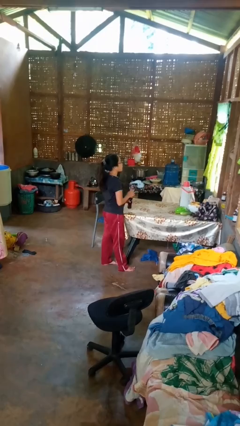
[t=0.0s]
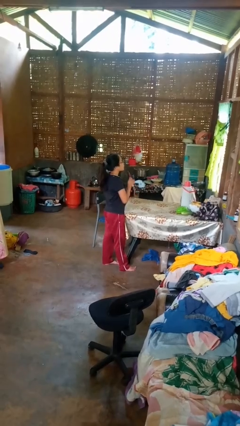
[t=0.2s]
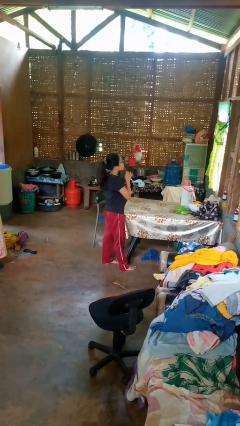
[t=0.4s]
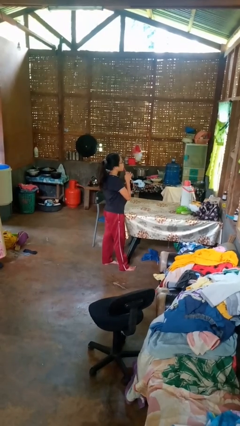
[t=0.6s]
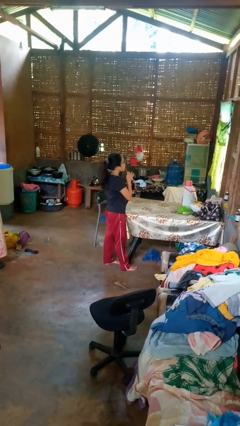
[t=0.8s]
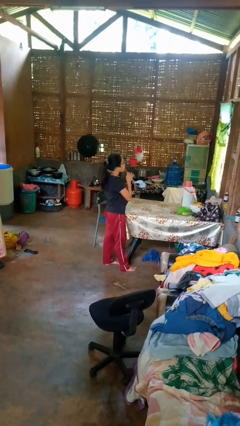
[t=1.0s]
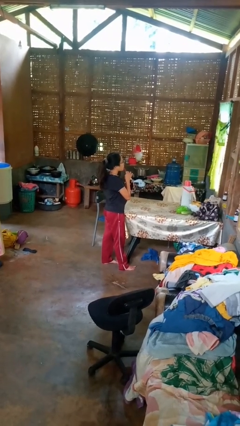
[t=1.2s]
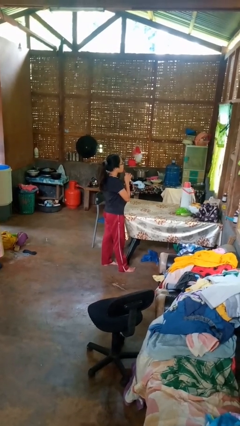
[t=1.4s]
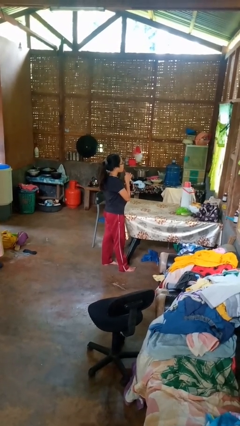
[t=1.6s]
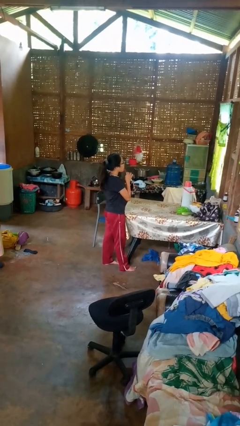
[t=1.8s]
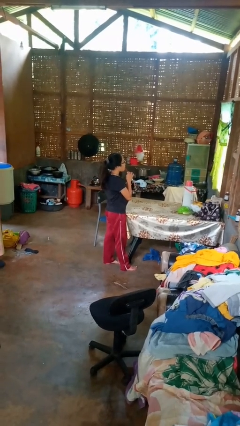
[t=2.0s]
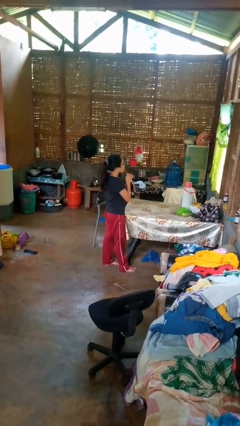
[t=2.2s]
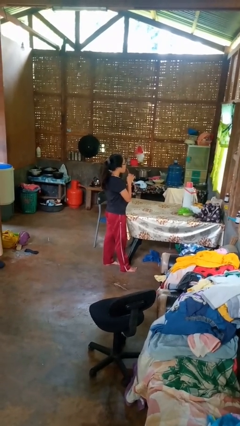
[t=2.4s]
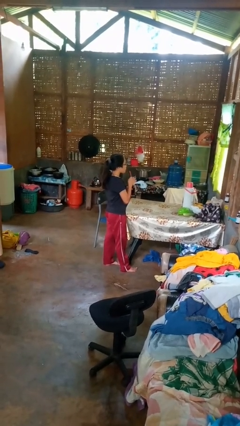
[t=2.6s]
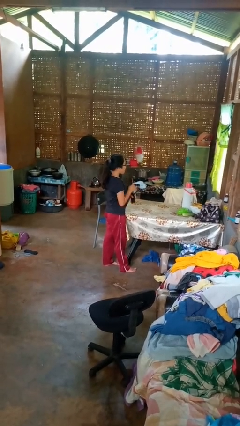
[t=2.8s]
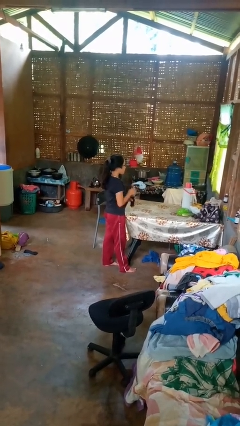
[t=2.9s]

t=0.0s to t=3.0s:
person drinks from straw

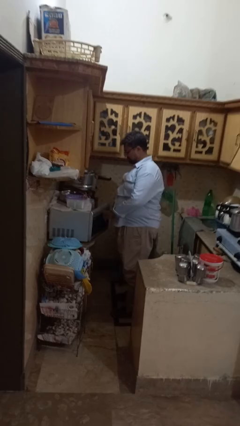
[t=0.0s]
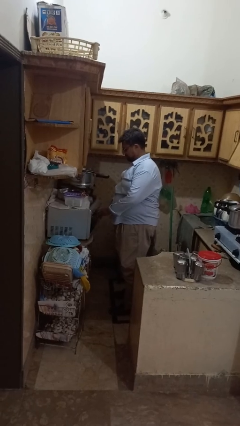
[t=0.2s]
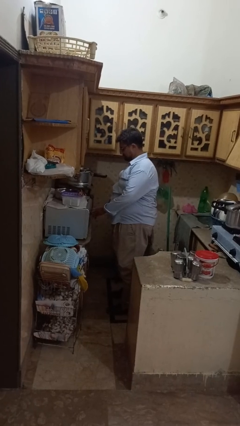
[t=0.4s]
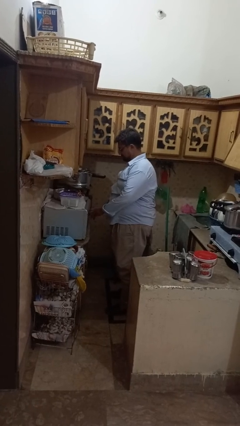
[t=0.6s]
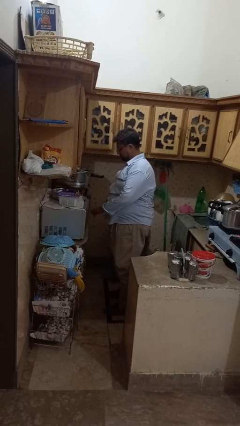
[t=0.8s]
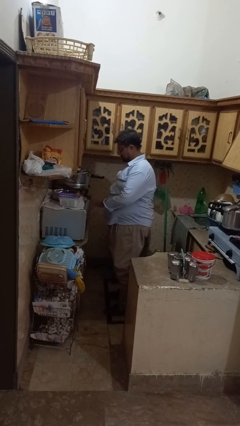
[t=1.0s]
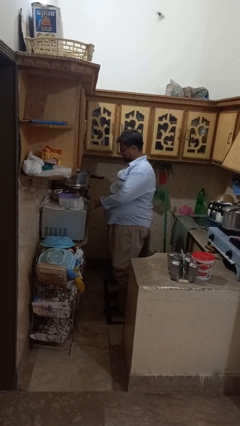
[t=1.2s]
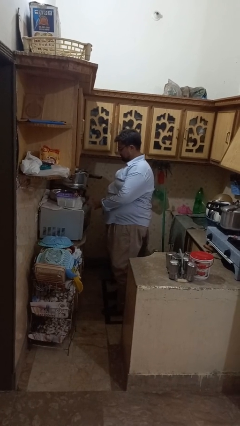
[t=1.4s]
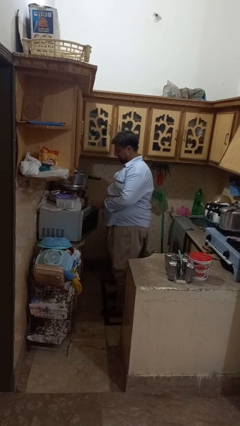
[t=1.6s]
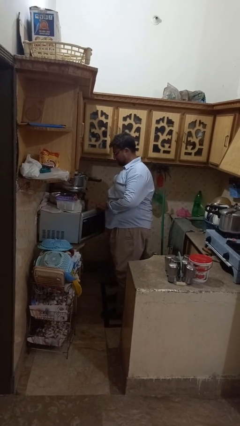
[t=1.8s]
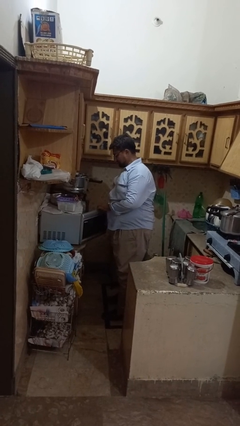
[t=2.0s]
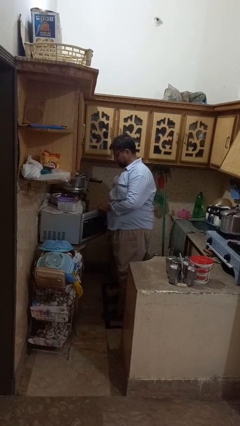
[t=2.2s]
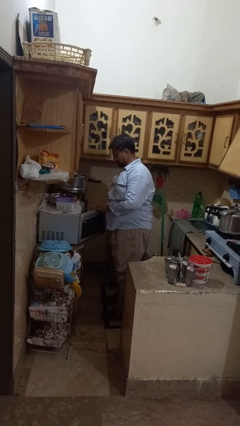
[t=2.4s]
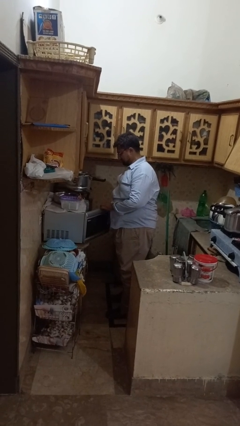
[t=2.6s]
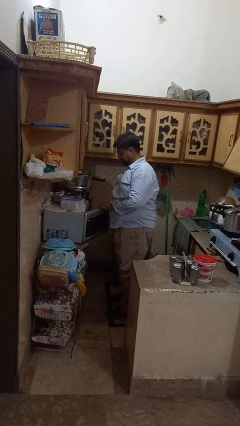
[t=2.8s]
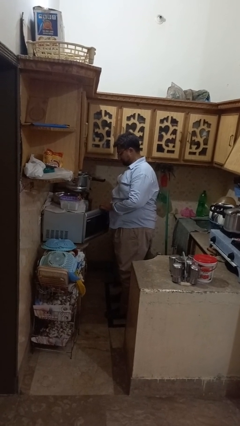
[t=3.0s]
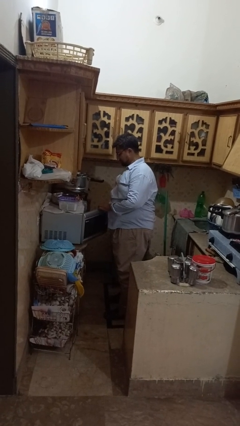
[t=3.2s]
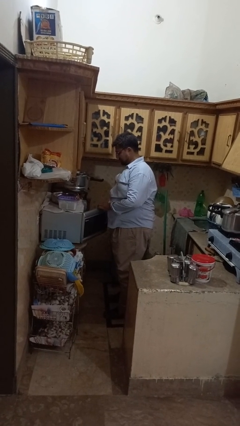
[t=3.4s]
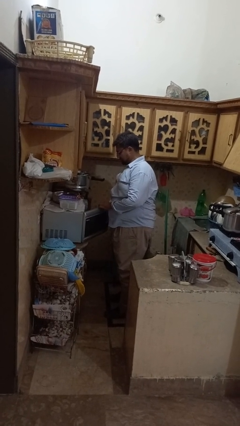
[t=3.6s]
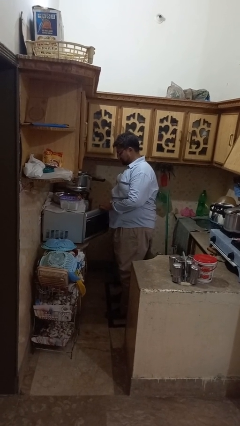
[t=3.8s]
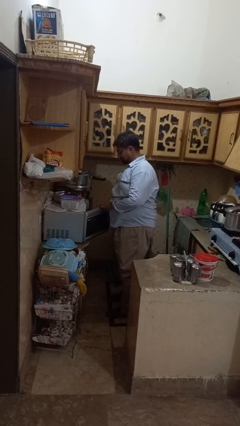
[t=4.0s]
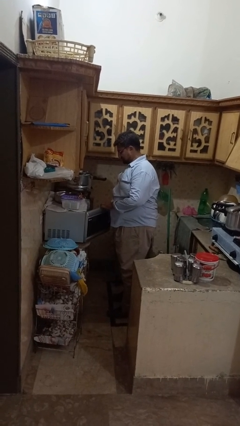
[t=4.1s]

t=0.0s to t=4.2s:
person opens microwave

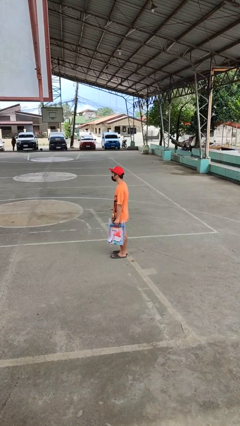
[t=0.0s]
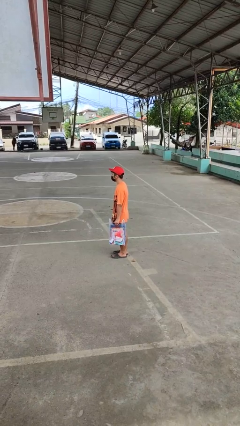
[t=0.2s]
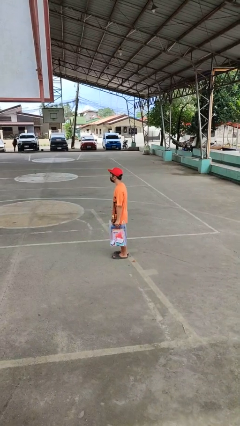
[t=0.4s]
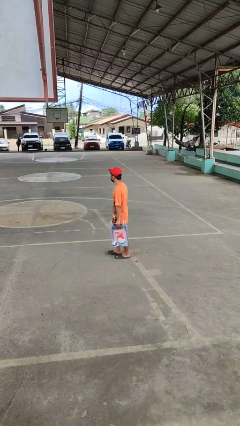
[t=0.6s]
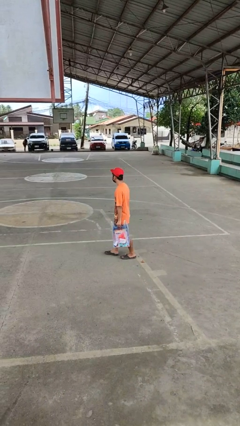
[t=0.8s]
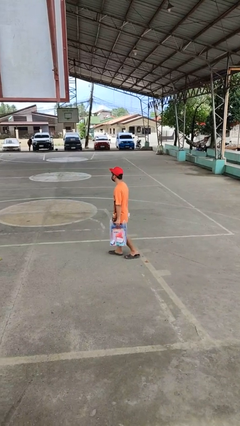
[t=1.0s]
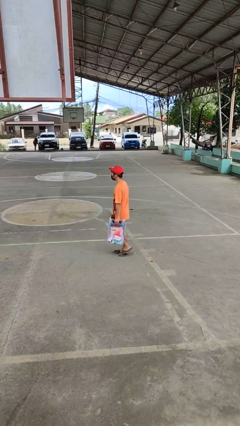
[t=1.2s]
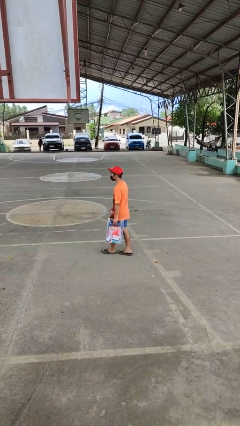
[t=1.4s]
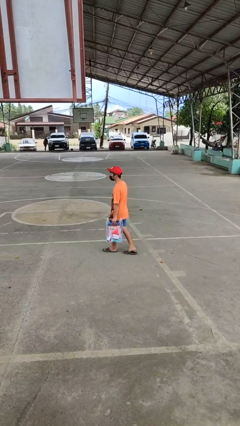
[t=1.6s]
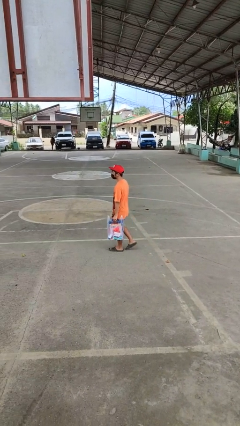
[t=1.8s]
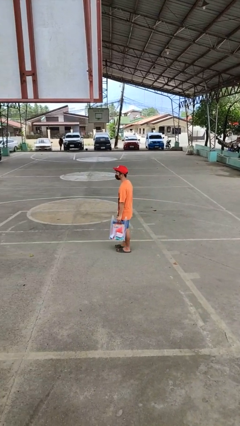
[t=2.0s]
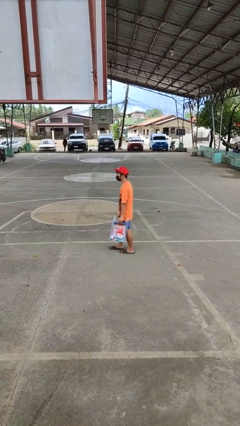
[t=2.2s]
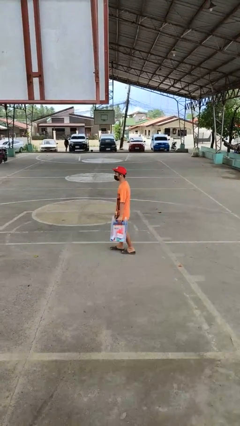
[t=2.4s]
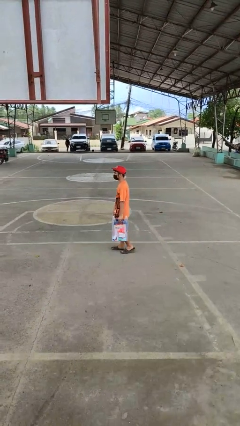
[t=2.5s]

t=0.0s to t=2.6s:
person carries groceries

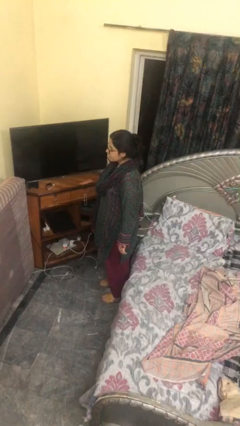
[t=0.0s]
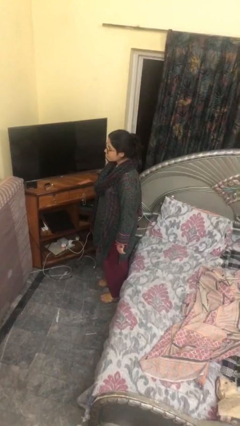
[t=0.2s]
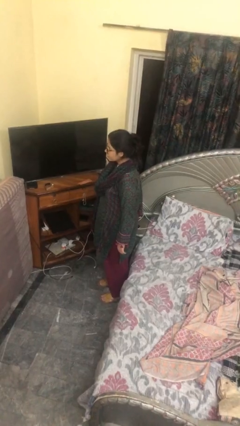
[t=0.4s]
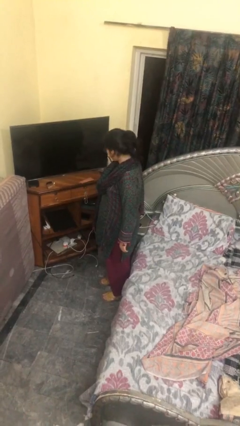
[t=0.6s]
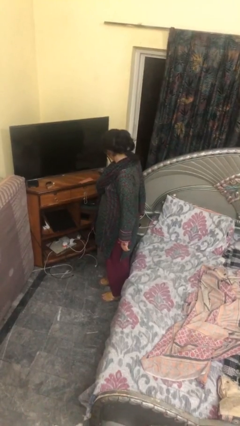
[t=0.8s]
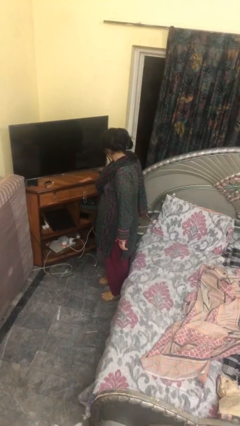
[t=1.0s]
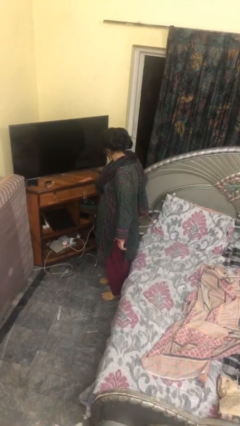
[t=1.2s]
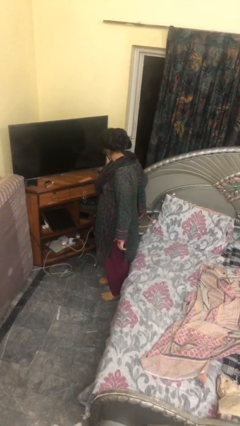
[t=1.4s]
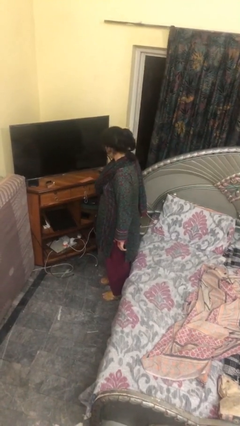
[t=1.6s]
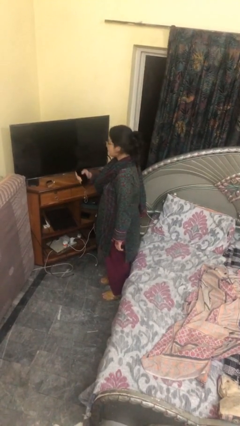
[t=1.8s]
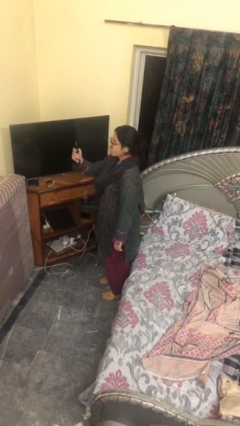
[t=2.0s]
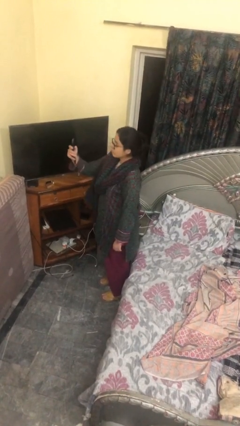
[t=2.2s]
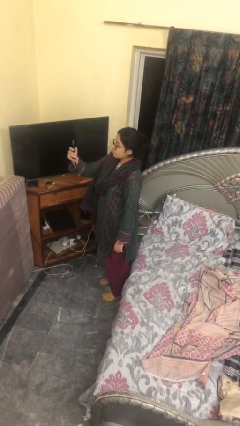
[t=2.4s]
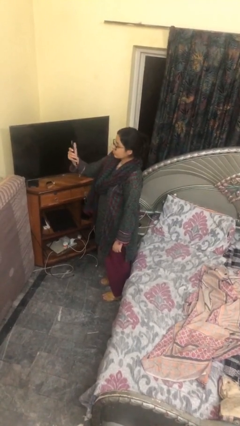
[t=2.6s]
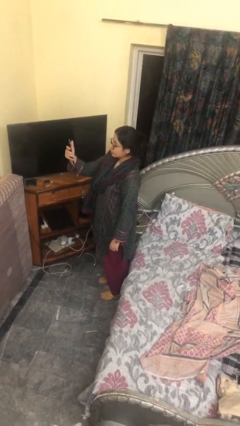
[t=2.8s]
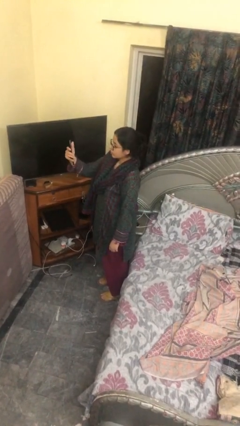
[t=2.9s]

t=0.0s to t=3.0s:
person takes phone from pocket

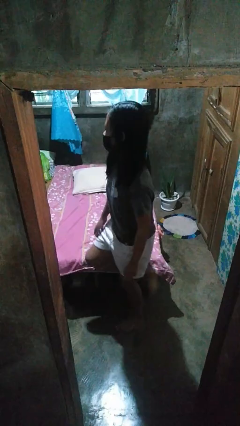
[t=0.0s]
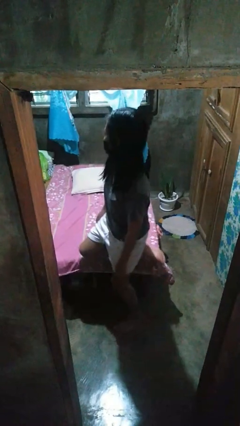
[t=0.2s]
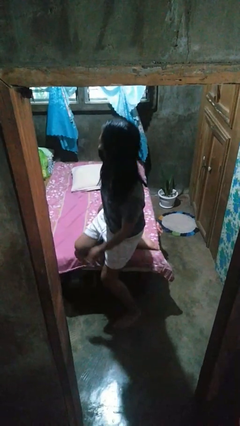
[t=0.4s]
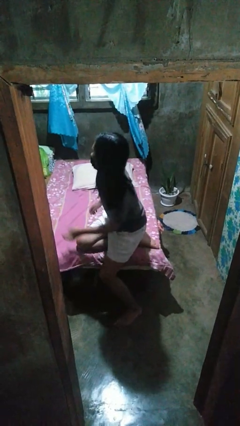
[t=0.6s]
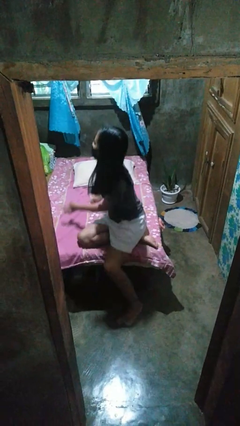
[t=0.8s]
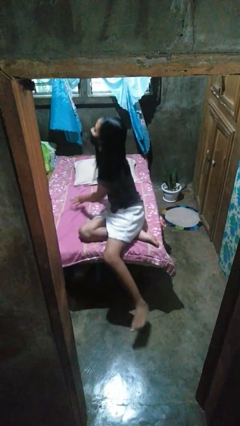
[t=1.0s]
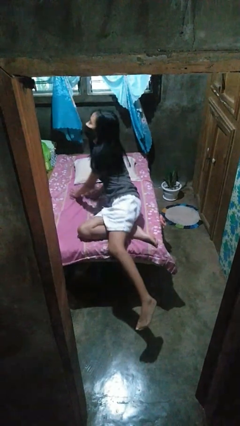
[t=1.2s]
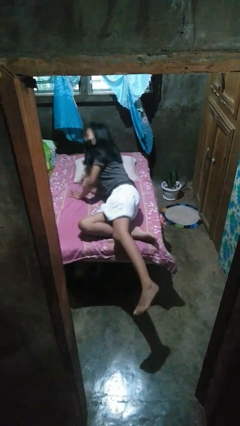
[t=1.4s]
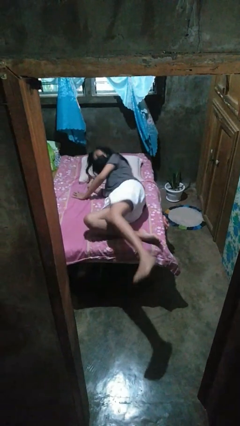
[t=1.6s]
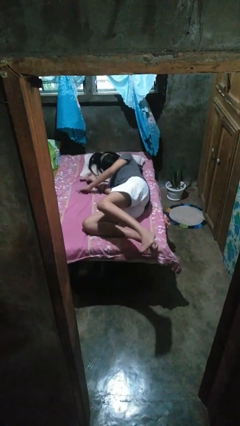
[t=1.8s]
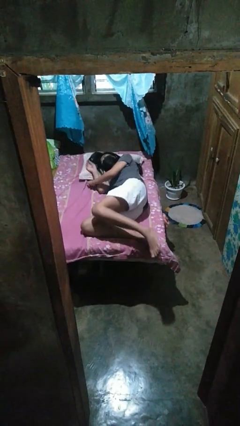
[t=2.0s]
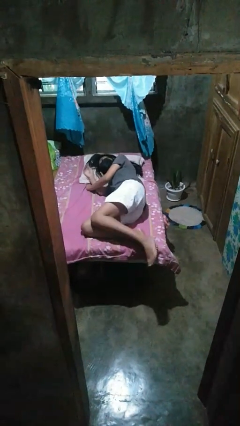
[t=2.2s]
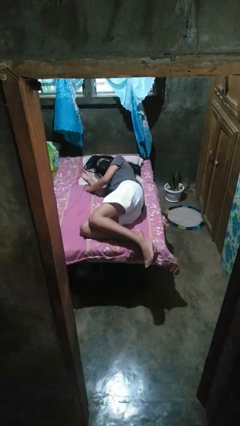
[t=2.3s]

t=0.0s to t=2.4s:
person lies down on bed

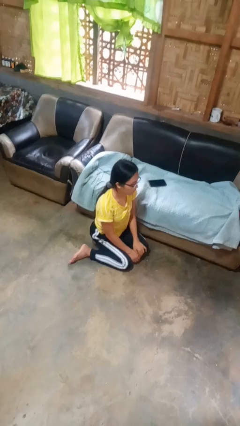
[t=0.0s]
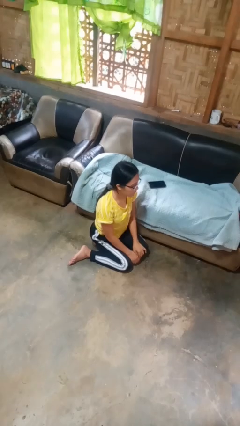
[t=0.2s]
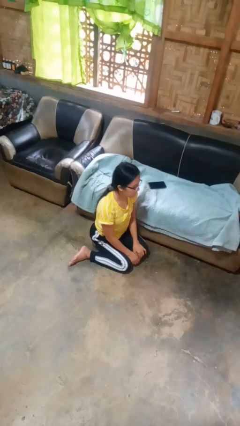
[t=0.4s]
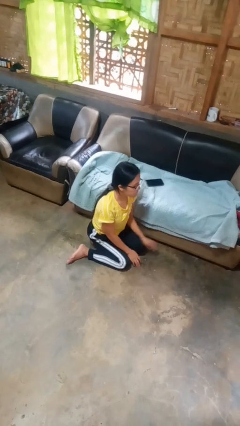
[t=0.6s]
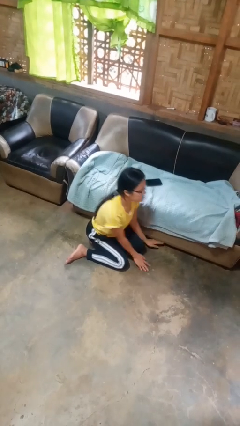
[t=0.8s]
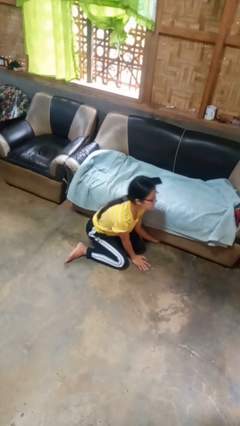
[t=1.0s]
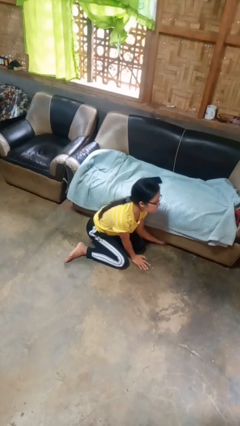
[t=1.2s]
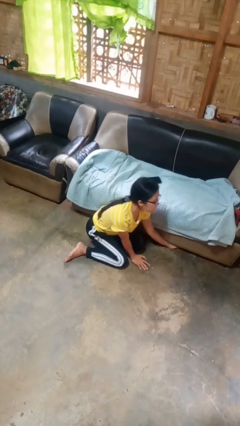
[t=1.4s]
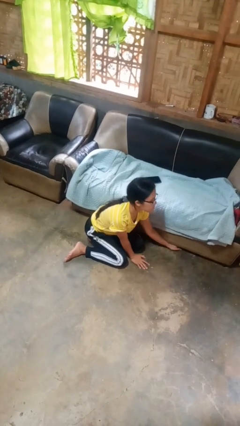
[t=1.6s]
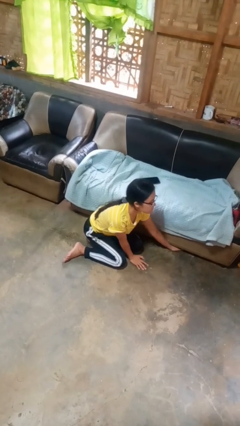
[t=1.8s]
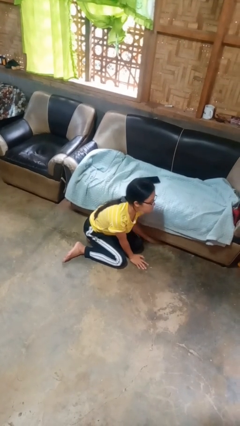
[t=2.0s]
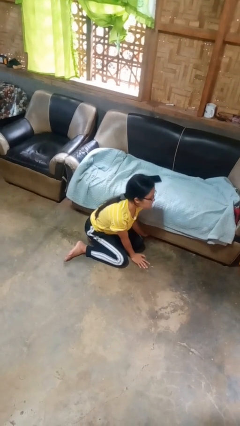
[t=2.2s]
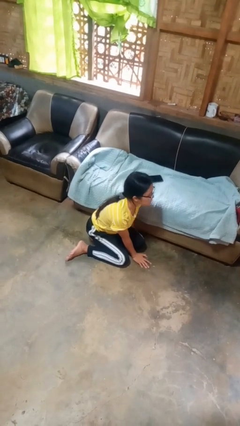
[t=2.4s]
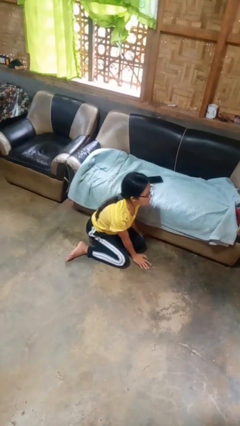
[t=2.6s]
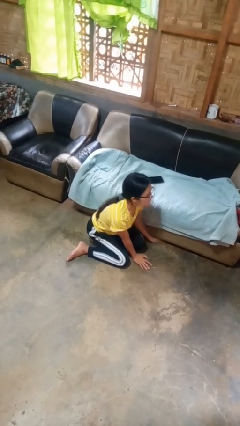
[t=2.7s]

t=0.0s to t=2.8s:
person searches under couch
